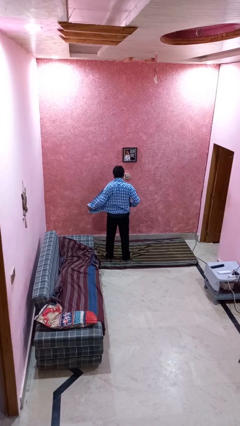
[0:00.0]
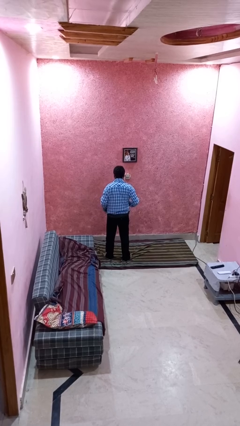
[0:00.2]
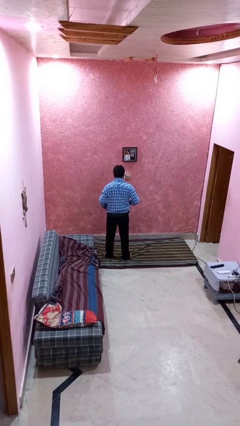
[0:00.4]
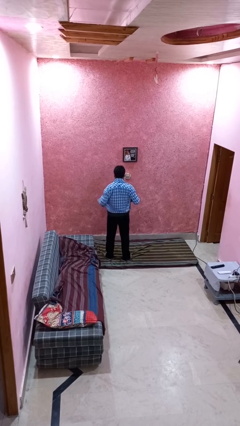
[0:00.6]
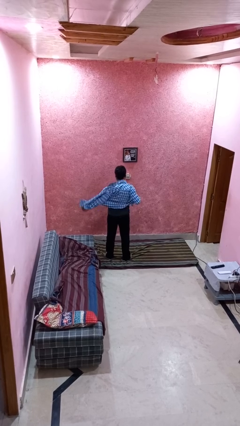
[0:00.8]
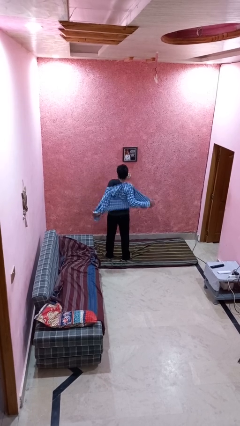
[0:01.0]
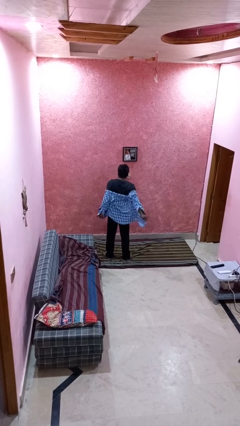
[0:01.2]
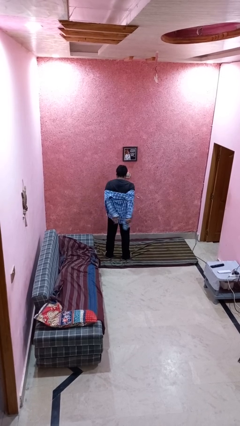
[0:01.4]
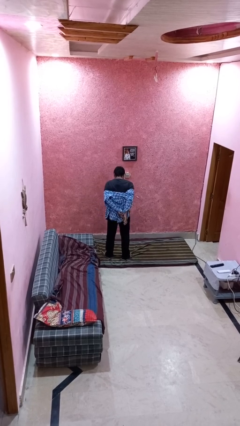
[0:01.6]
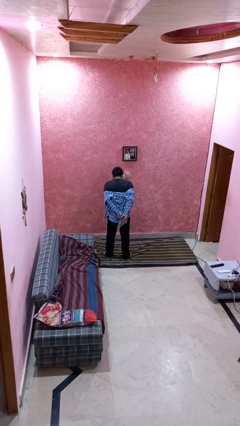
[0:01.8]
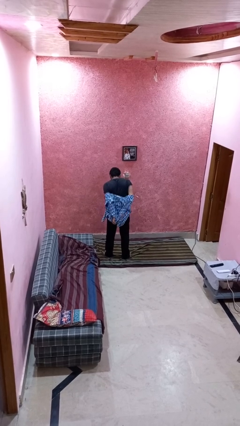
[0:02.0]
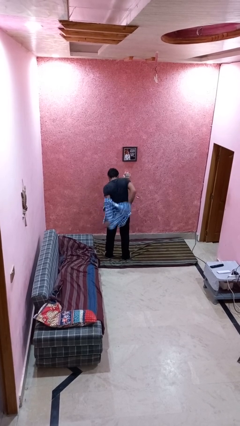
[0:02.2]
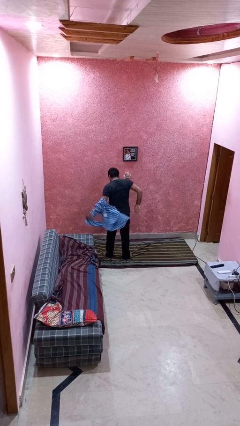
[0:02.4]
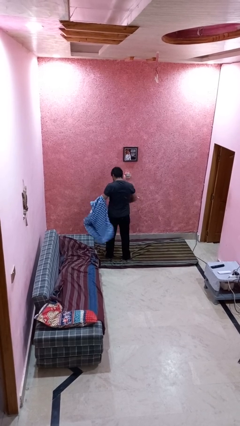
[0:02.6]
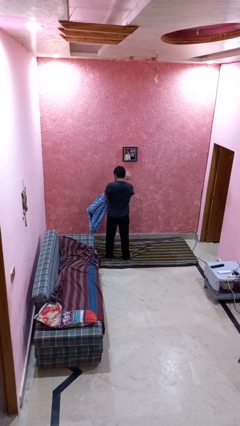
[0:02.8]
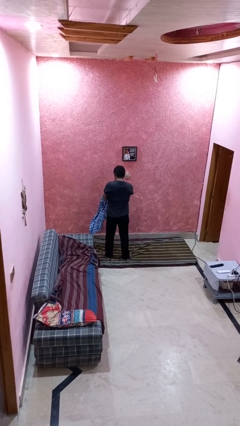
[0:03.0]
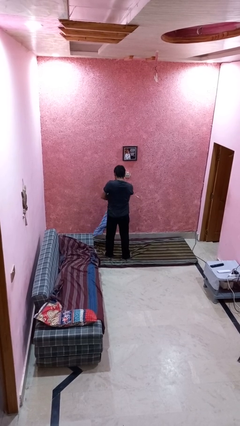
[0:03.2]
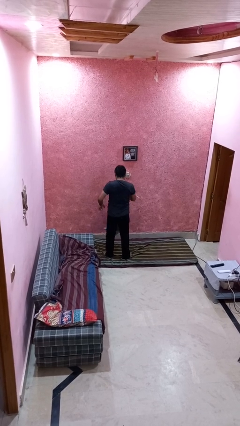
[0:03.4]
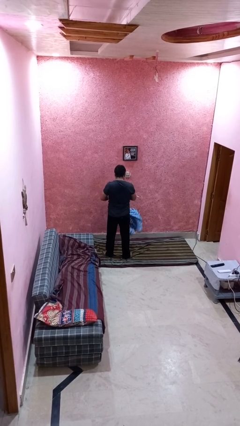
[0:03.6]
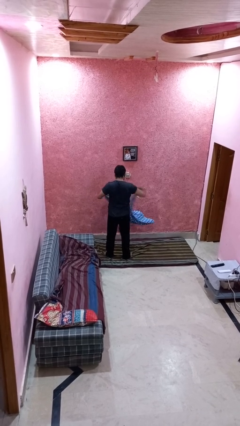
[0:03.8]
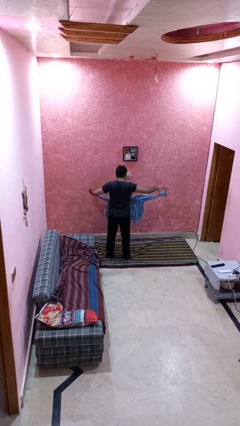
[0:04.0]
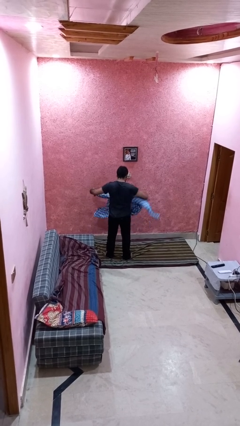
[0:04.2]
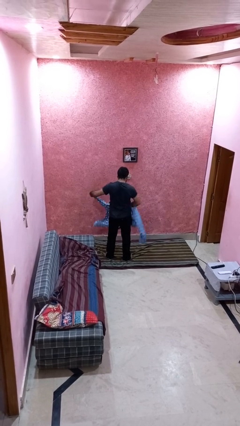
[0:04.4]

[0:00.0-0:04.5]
person takes off shirt

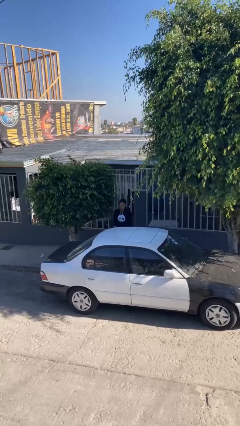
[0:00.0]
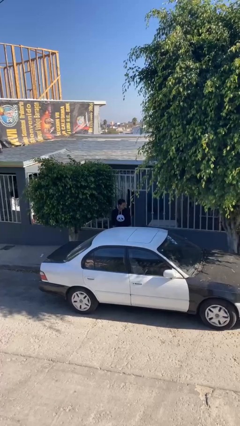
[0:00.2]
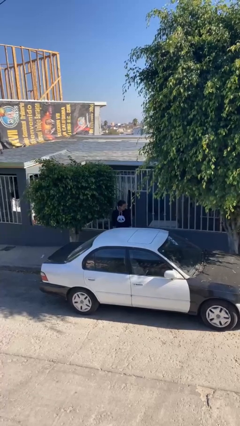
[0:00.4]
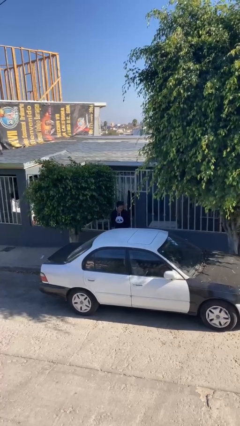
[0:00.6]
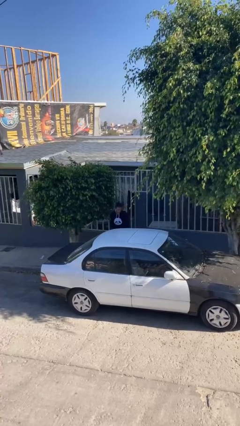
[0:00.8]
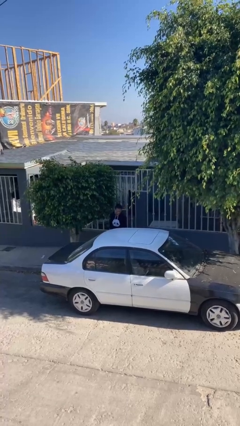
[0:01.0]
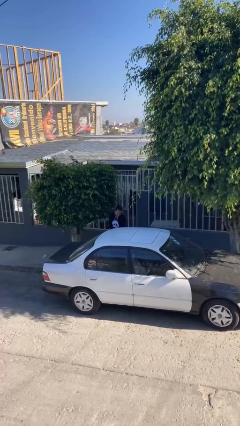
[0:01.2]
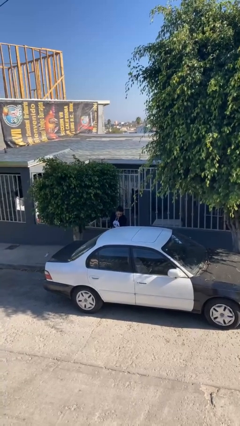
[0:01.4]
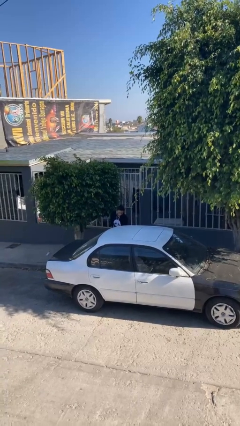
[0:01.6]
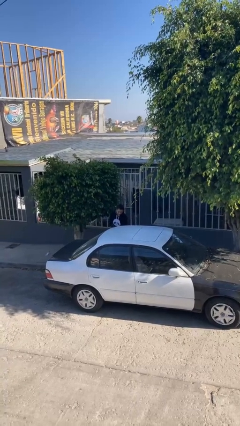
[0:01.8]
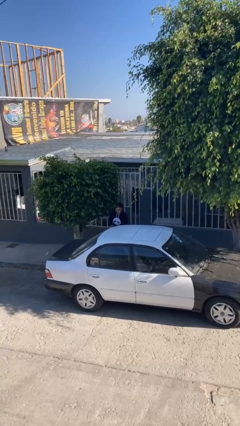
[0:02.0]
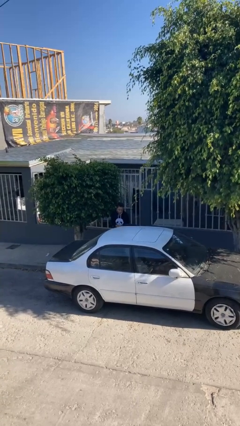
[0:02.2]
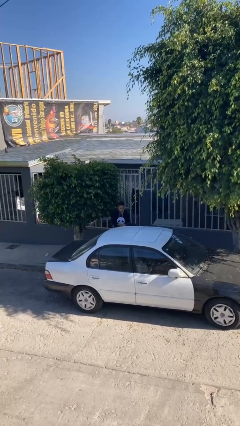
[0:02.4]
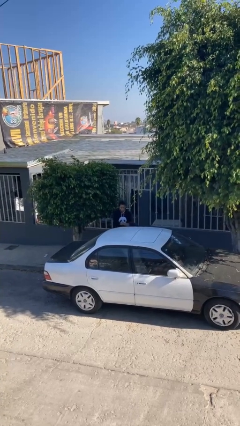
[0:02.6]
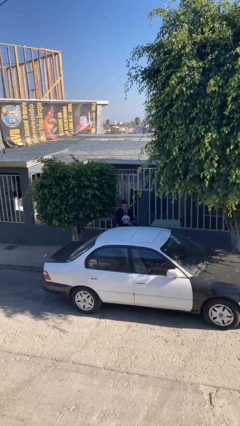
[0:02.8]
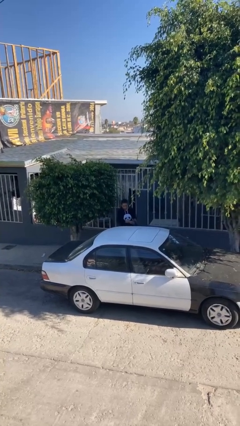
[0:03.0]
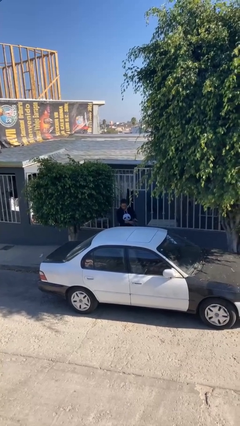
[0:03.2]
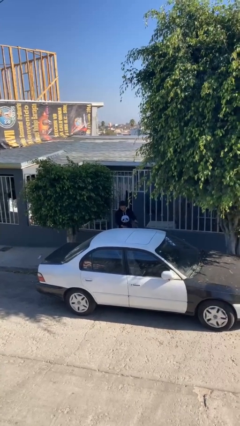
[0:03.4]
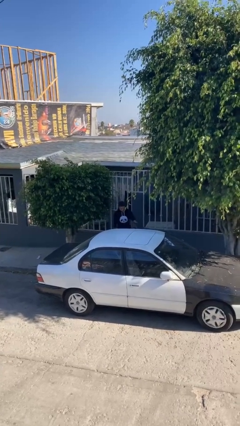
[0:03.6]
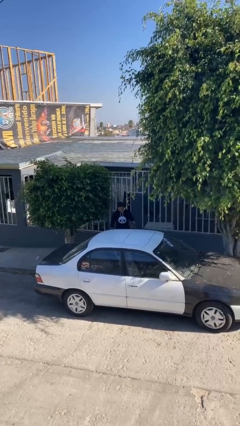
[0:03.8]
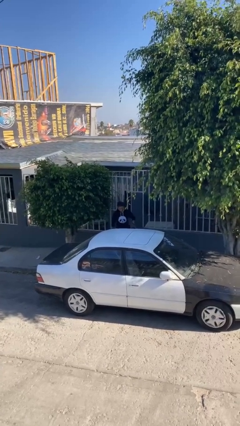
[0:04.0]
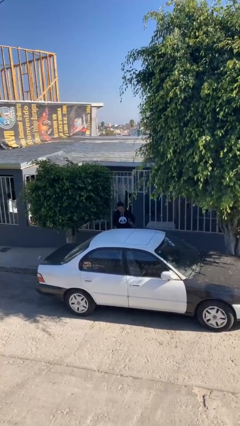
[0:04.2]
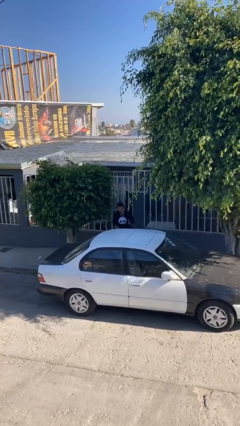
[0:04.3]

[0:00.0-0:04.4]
person opens car door

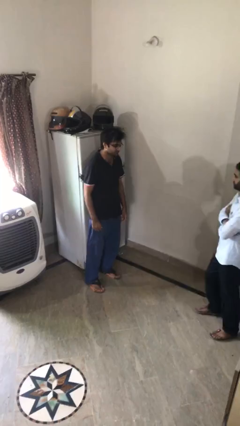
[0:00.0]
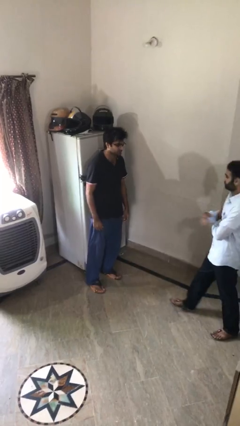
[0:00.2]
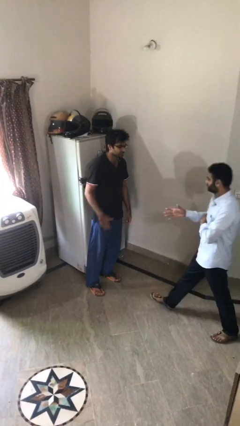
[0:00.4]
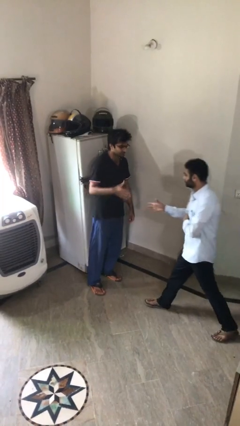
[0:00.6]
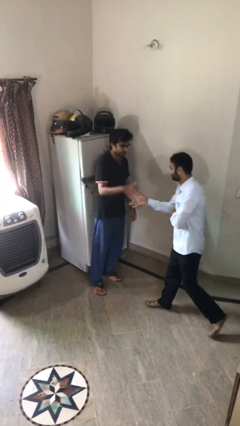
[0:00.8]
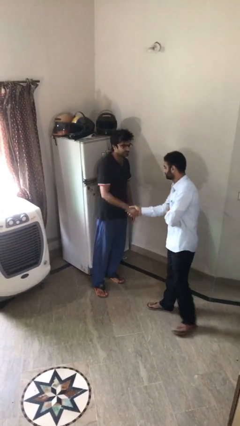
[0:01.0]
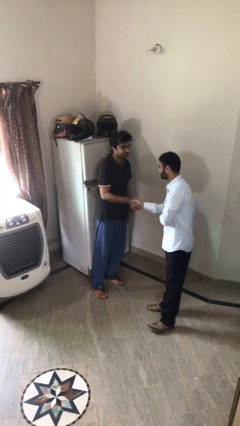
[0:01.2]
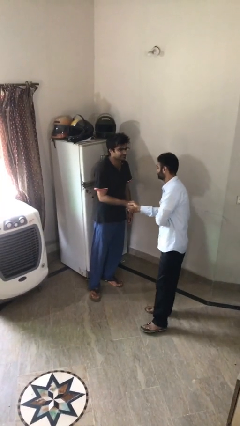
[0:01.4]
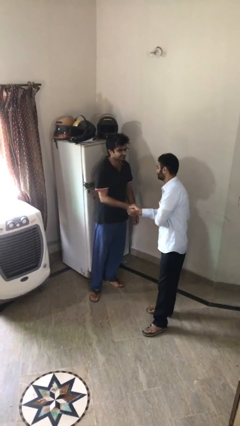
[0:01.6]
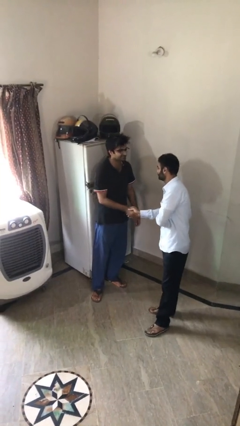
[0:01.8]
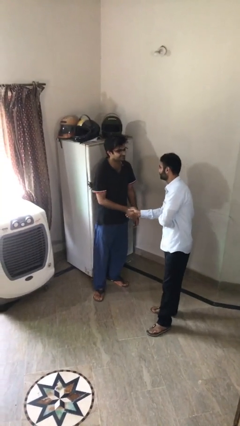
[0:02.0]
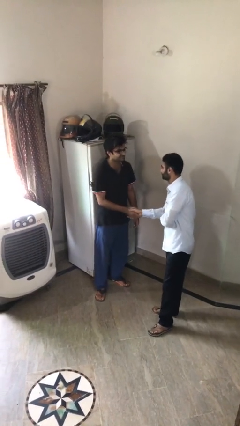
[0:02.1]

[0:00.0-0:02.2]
person shakes hand

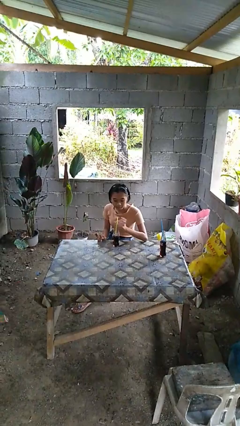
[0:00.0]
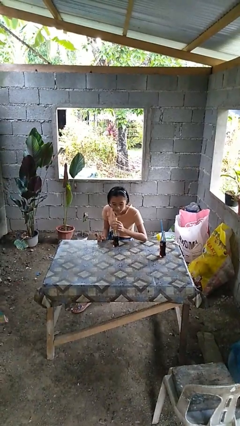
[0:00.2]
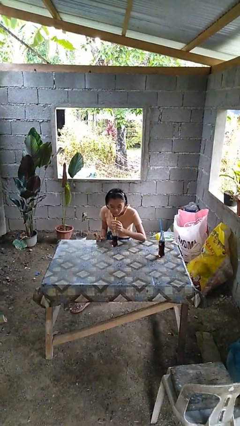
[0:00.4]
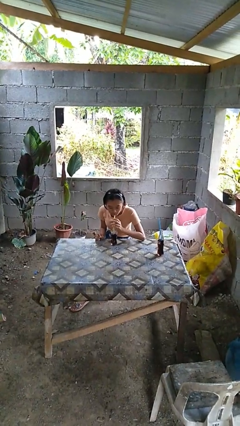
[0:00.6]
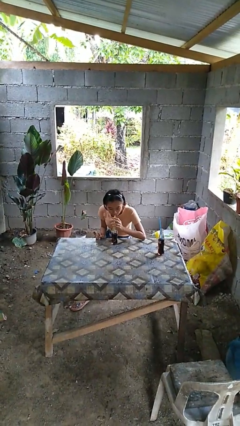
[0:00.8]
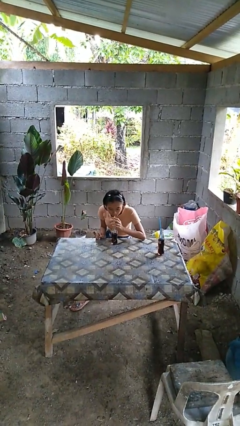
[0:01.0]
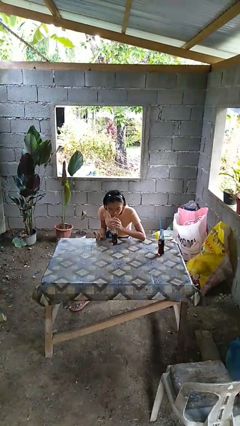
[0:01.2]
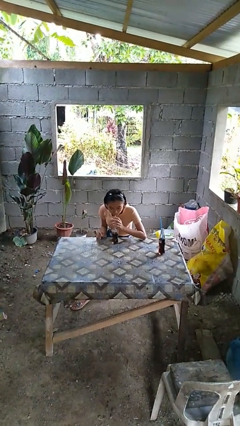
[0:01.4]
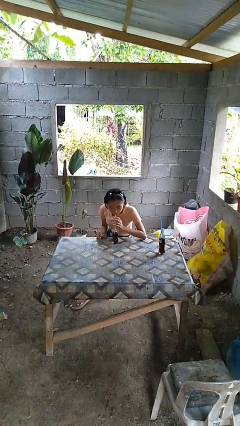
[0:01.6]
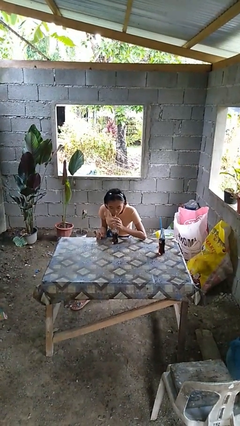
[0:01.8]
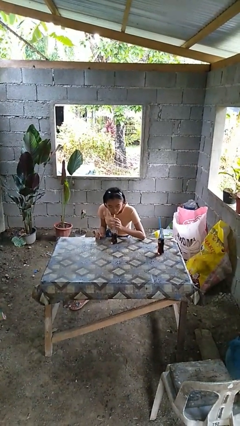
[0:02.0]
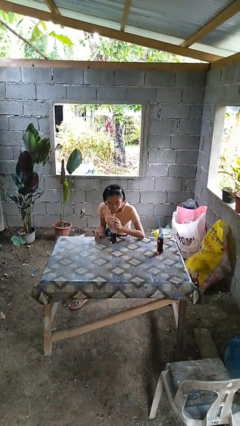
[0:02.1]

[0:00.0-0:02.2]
person drinks from straw

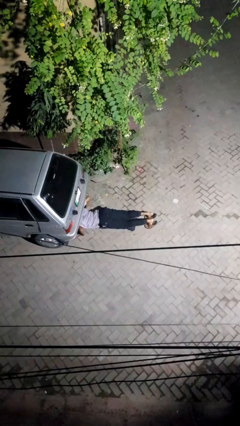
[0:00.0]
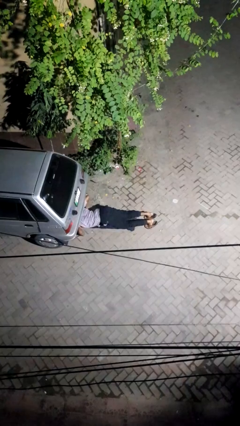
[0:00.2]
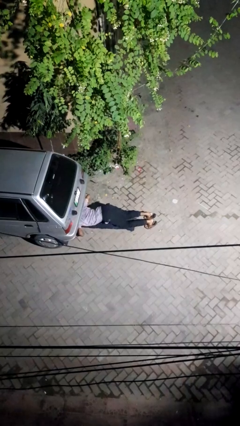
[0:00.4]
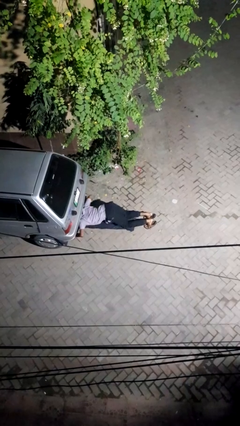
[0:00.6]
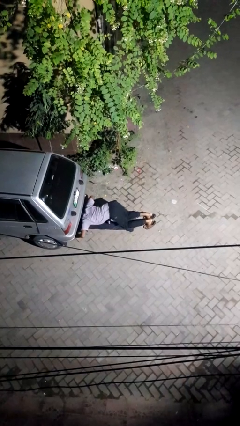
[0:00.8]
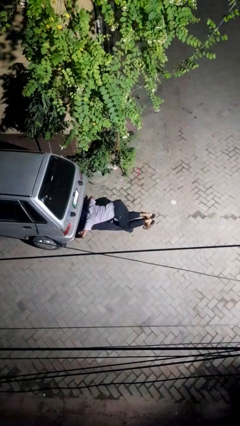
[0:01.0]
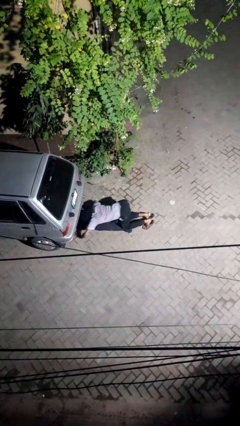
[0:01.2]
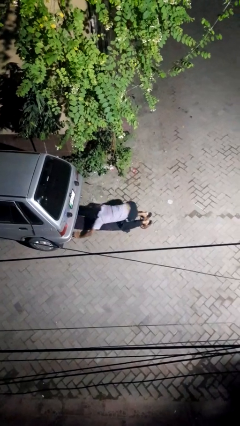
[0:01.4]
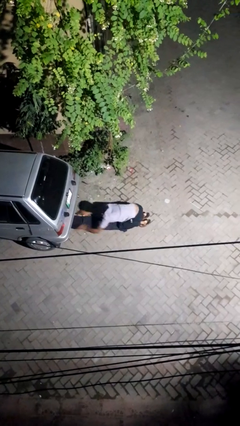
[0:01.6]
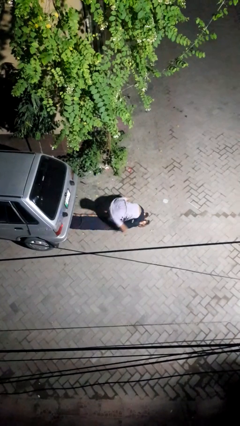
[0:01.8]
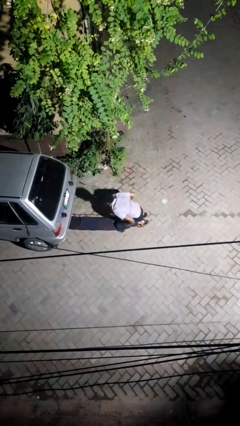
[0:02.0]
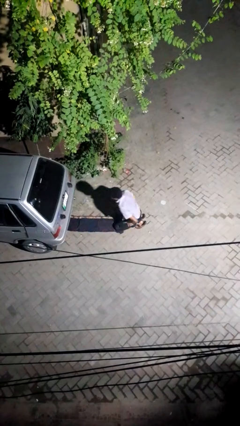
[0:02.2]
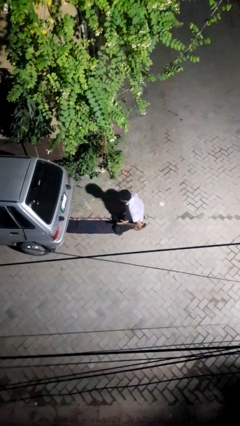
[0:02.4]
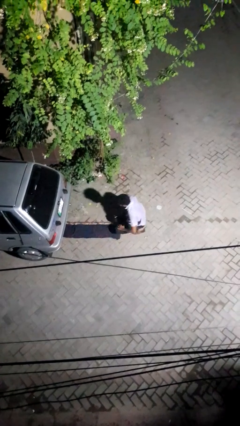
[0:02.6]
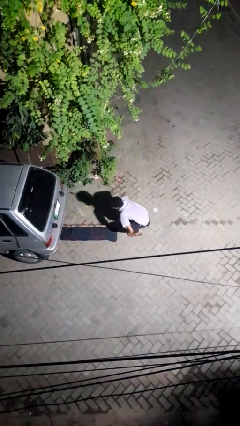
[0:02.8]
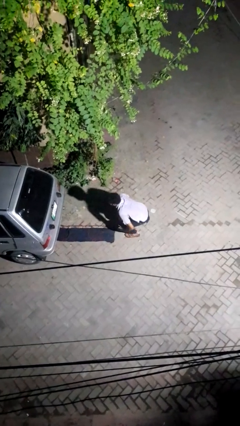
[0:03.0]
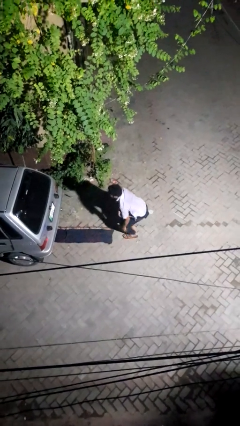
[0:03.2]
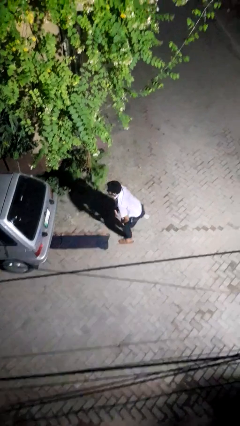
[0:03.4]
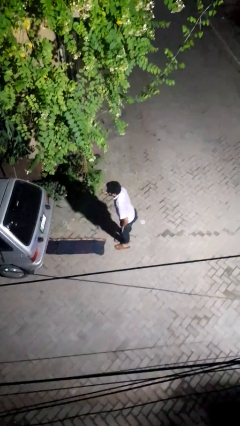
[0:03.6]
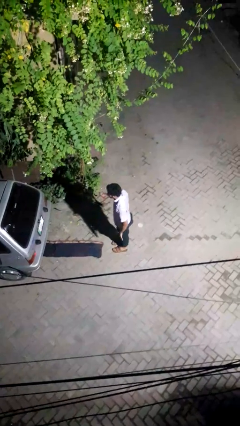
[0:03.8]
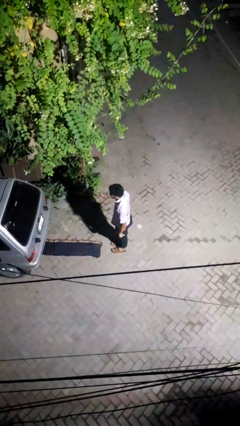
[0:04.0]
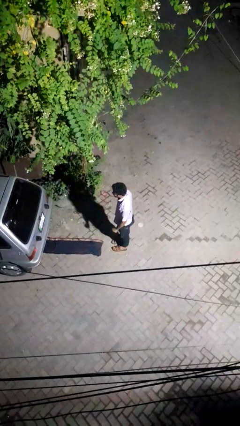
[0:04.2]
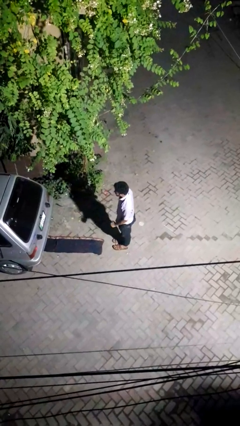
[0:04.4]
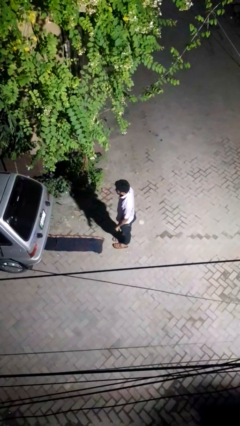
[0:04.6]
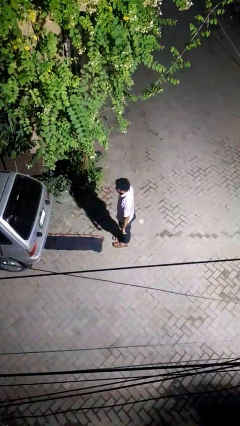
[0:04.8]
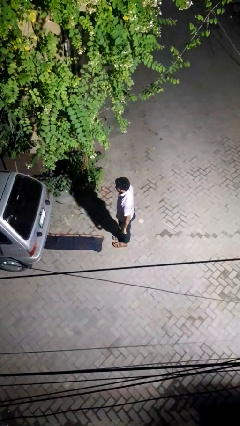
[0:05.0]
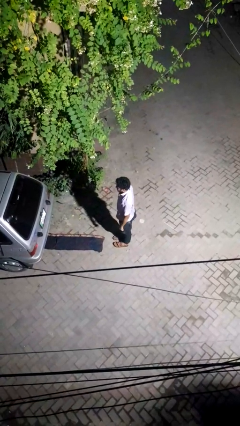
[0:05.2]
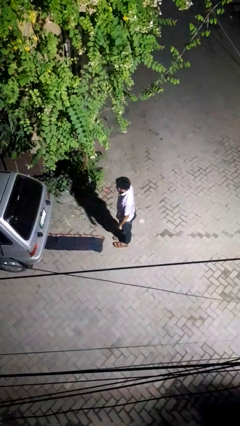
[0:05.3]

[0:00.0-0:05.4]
person crawls out from under vehicle
